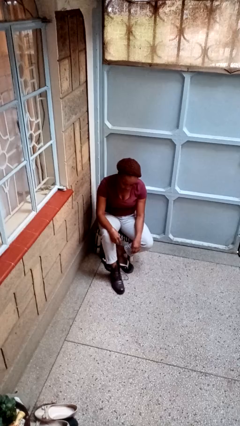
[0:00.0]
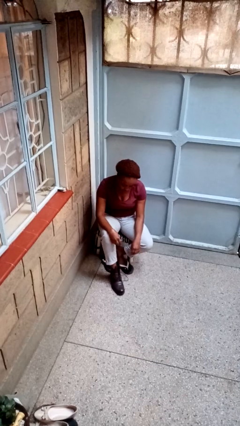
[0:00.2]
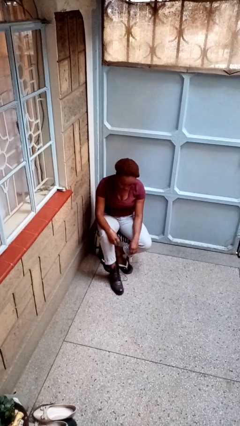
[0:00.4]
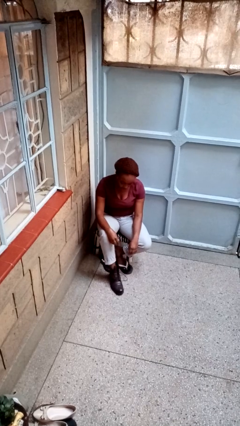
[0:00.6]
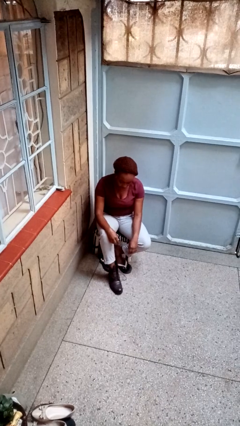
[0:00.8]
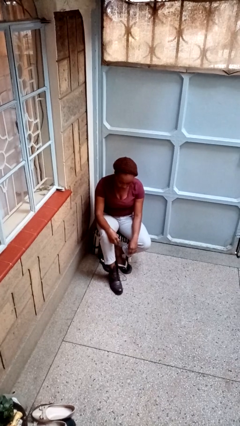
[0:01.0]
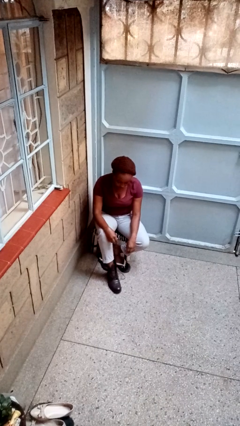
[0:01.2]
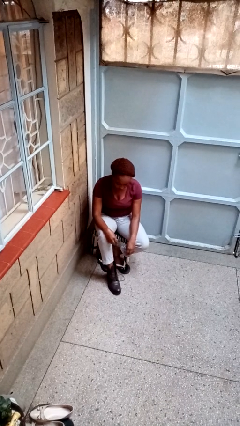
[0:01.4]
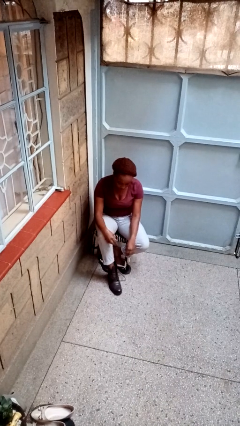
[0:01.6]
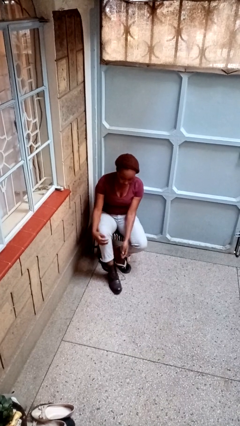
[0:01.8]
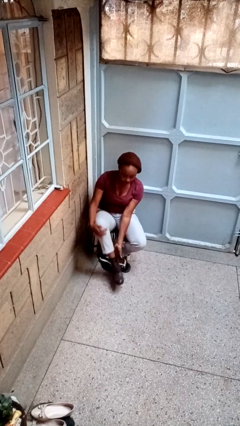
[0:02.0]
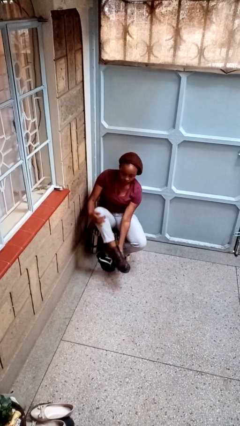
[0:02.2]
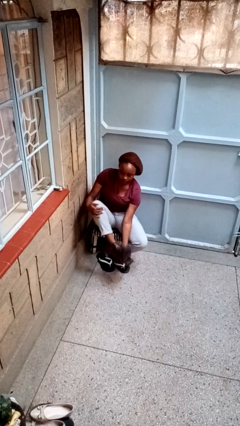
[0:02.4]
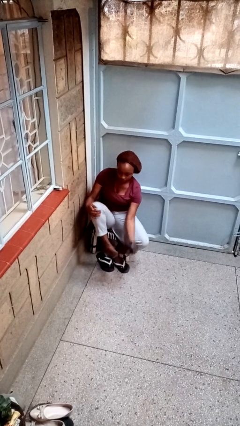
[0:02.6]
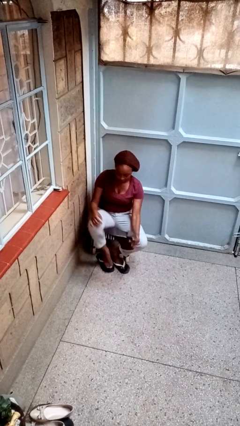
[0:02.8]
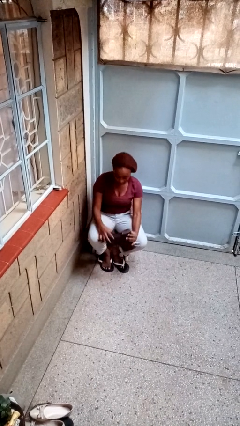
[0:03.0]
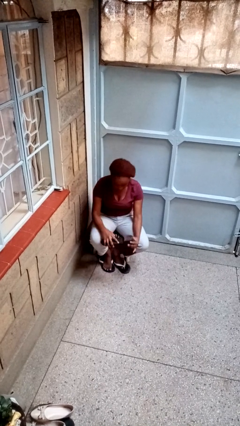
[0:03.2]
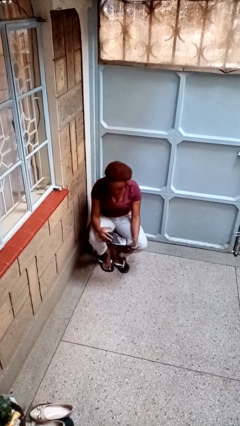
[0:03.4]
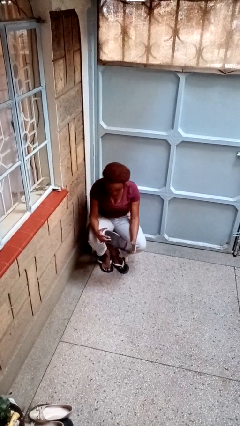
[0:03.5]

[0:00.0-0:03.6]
person takes off boots

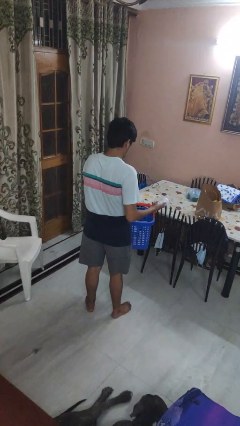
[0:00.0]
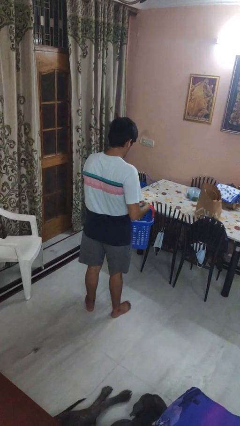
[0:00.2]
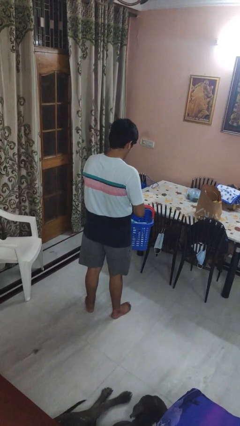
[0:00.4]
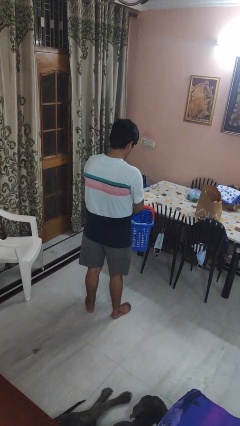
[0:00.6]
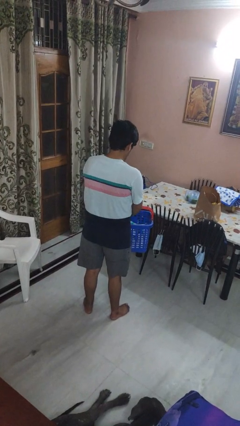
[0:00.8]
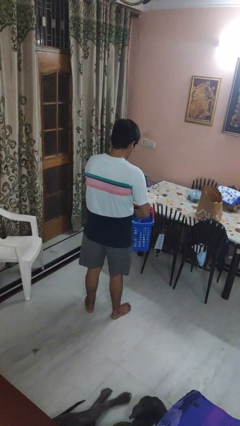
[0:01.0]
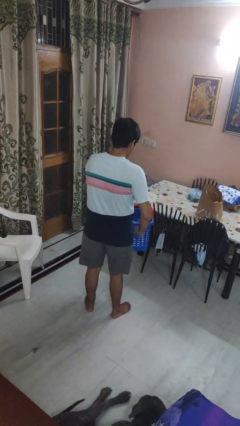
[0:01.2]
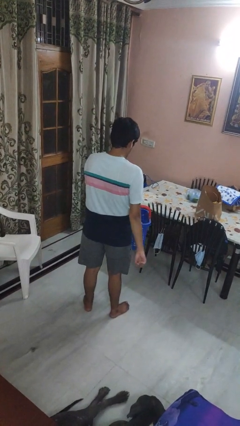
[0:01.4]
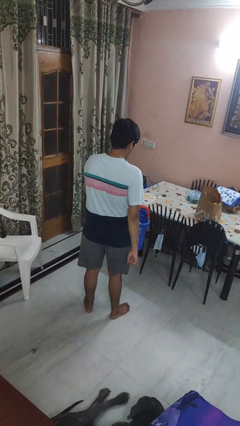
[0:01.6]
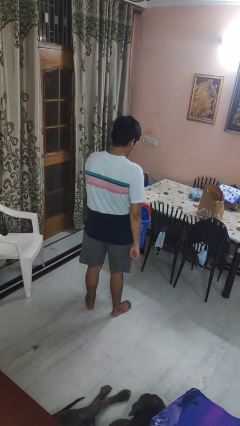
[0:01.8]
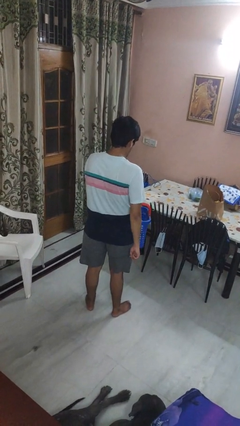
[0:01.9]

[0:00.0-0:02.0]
person puts object into basket

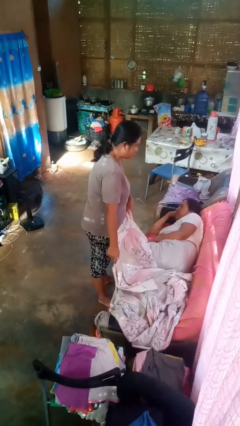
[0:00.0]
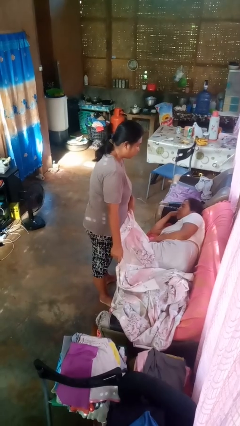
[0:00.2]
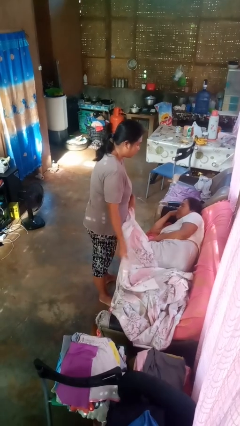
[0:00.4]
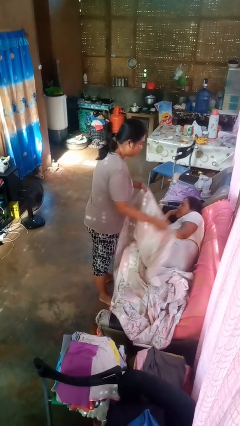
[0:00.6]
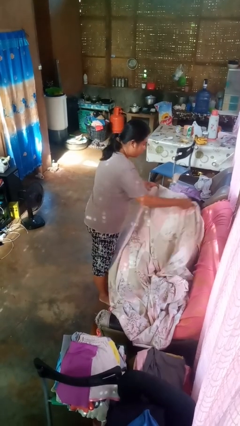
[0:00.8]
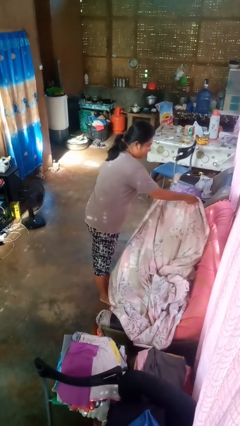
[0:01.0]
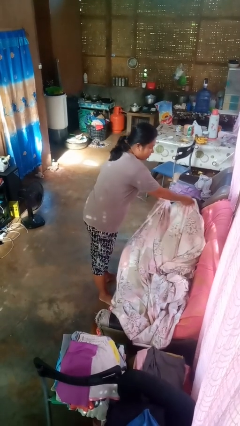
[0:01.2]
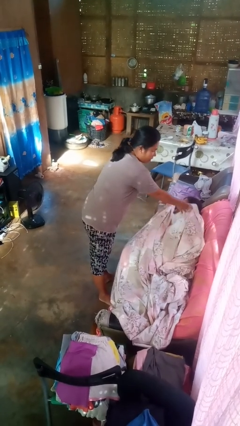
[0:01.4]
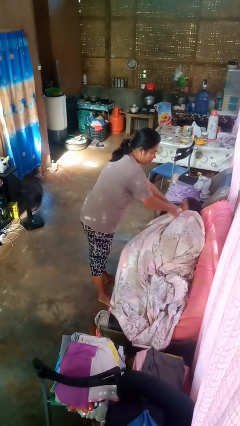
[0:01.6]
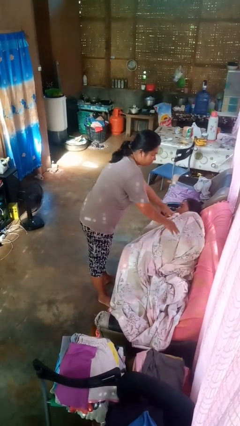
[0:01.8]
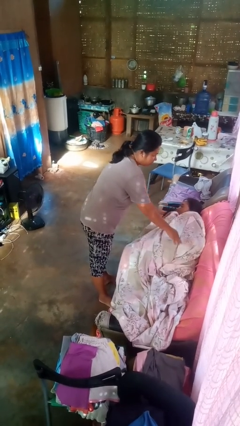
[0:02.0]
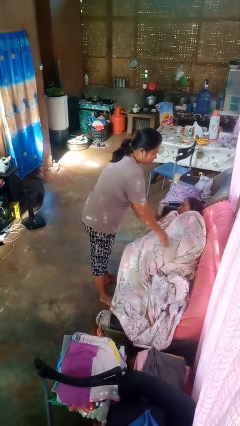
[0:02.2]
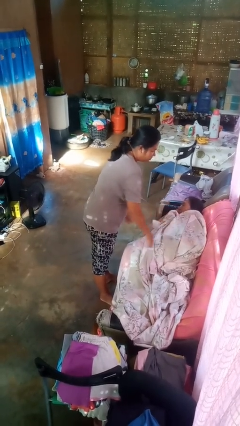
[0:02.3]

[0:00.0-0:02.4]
person covers friend with blanket

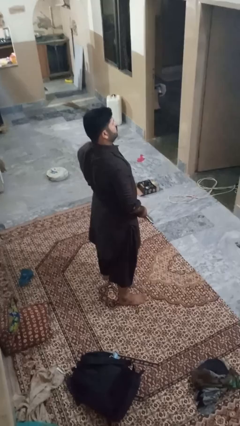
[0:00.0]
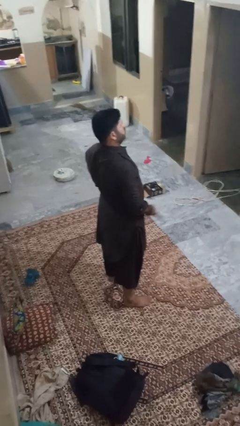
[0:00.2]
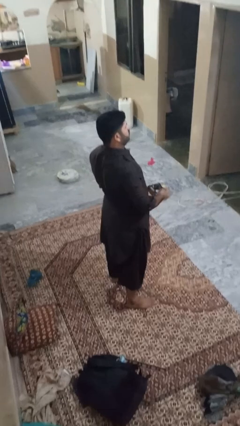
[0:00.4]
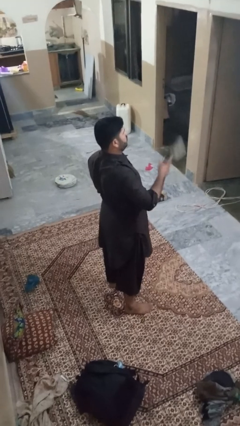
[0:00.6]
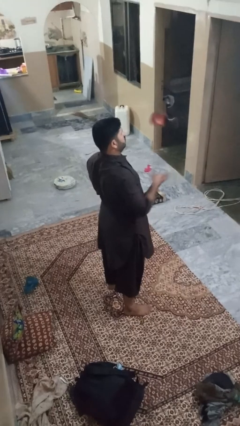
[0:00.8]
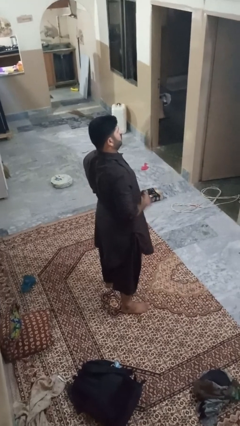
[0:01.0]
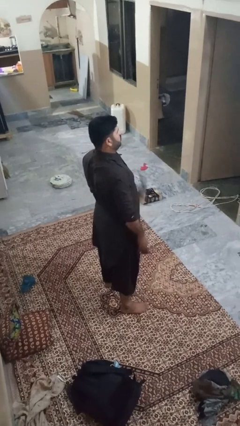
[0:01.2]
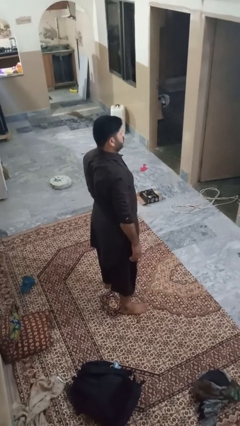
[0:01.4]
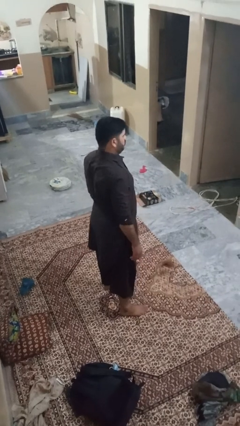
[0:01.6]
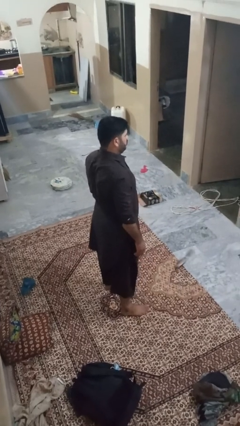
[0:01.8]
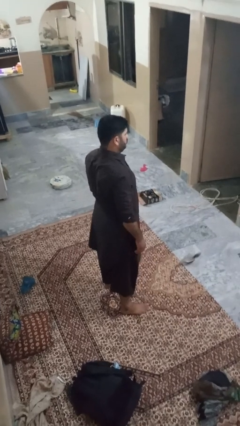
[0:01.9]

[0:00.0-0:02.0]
person throws object into air

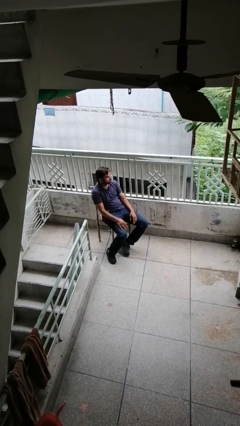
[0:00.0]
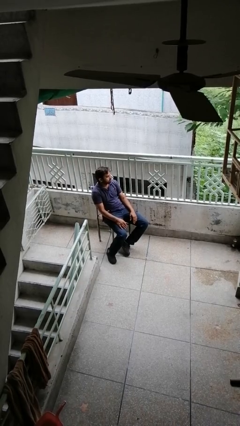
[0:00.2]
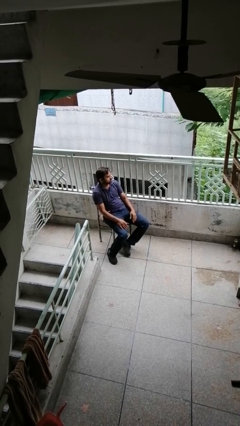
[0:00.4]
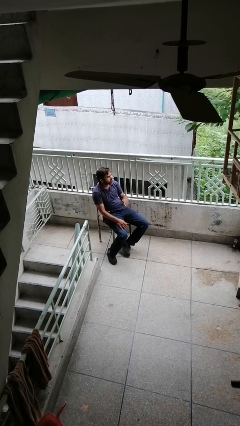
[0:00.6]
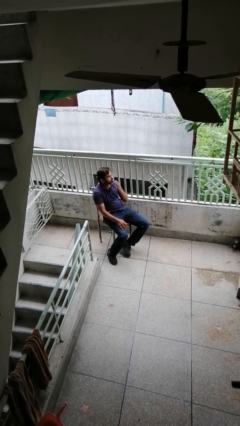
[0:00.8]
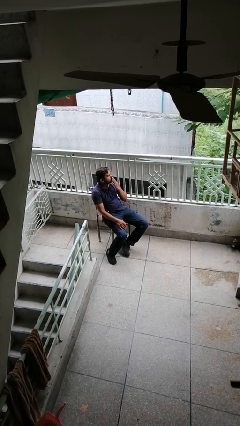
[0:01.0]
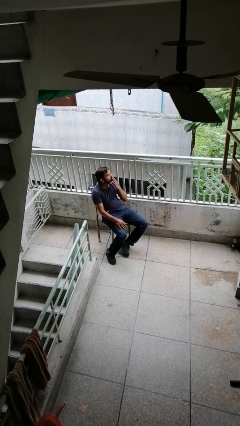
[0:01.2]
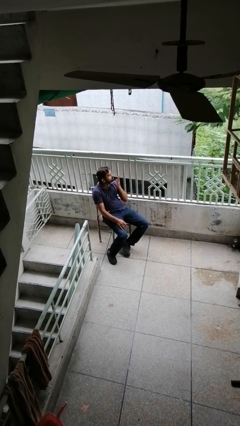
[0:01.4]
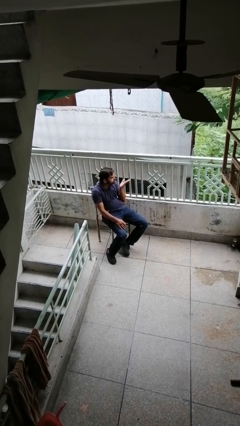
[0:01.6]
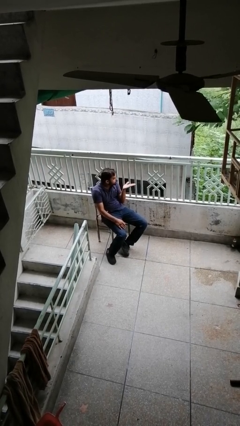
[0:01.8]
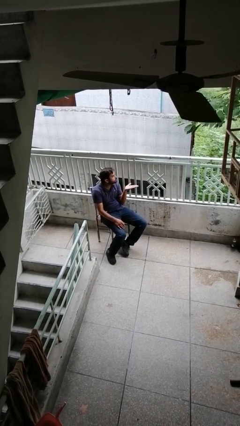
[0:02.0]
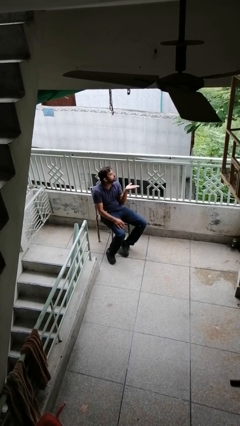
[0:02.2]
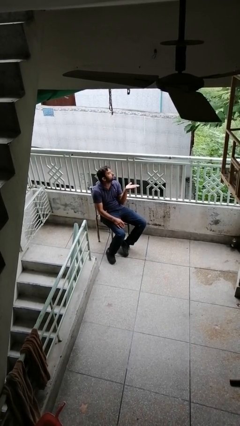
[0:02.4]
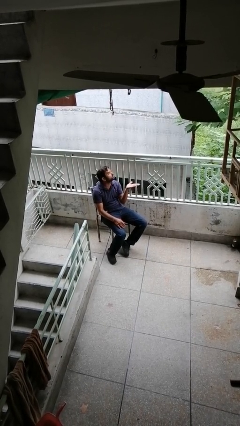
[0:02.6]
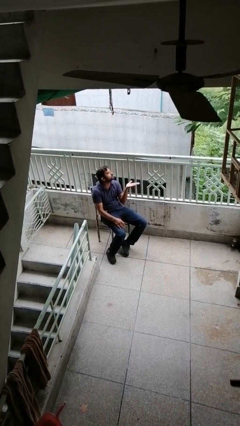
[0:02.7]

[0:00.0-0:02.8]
person gestures blow kiss

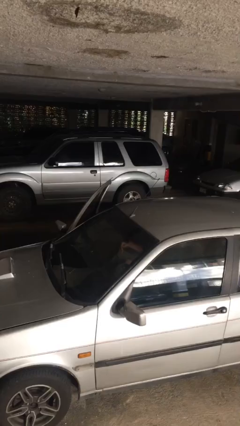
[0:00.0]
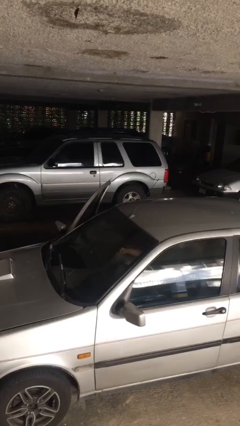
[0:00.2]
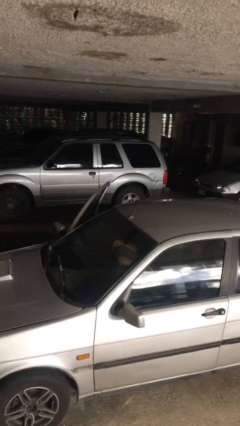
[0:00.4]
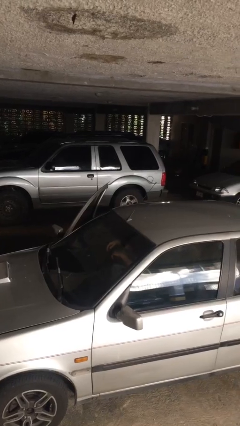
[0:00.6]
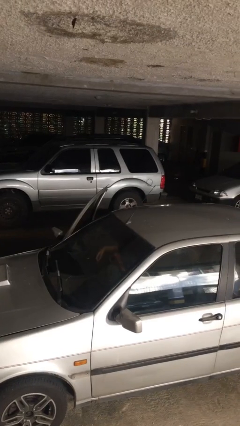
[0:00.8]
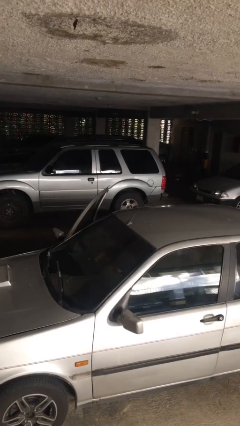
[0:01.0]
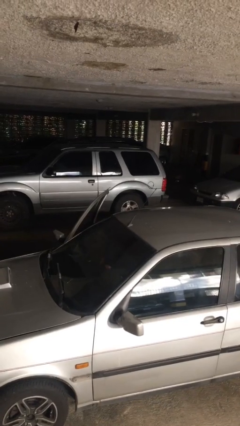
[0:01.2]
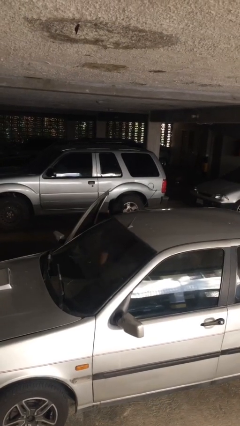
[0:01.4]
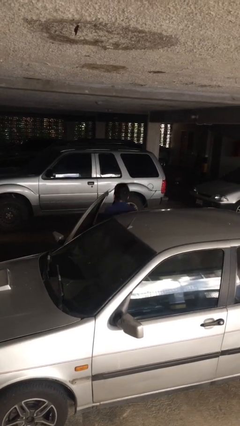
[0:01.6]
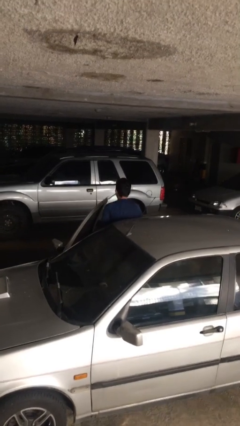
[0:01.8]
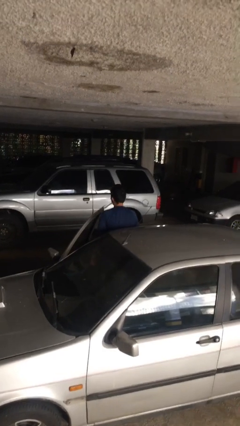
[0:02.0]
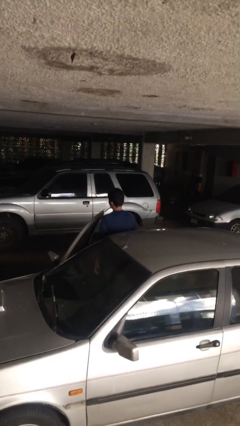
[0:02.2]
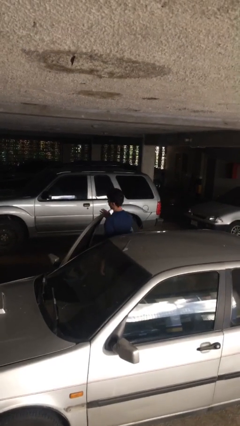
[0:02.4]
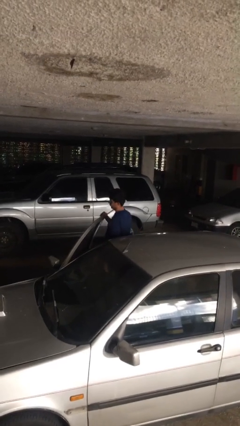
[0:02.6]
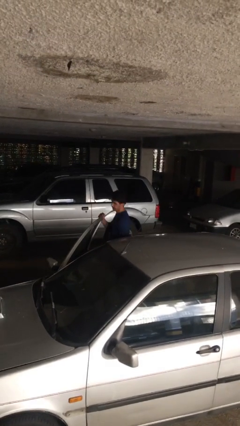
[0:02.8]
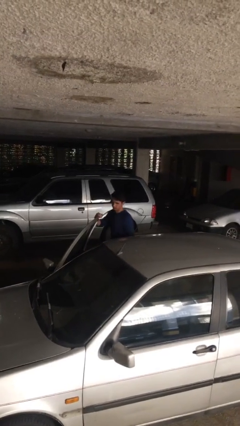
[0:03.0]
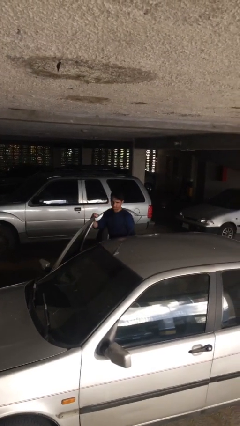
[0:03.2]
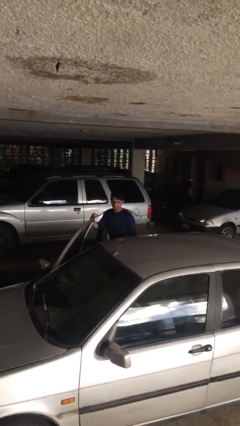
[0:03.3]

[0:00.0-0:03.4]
person exits car

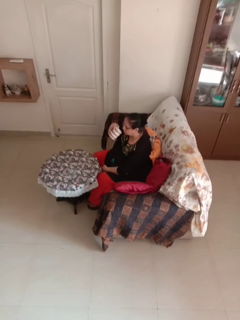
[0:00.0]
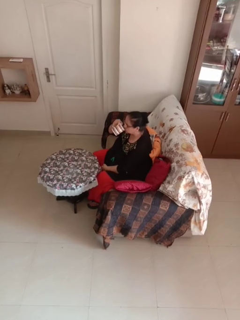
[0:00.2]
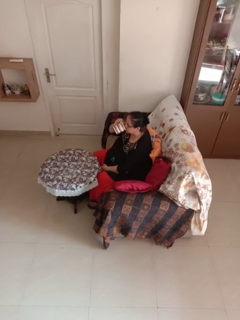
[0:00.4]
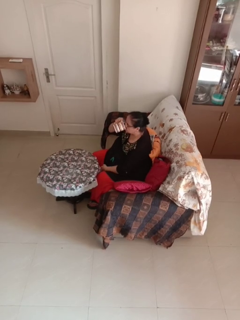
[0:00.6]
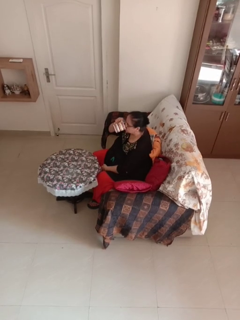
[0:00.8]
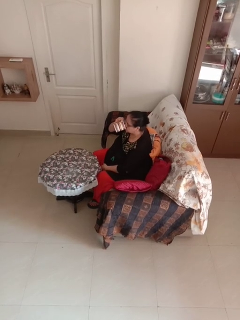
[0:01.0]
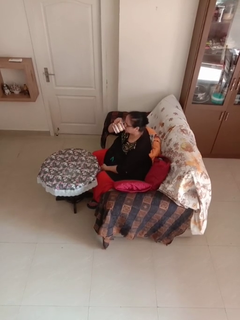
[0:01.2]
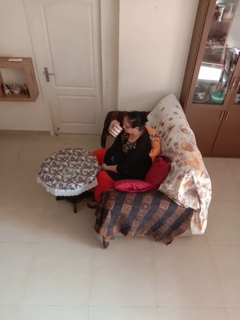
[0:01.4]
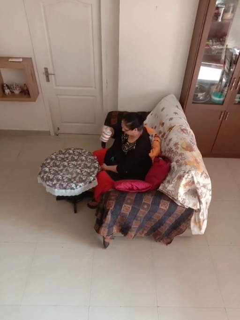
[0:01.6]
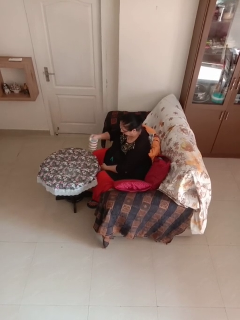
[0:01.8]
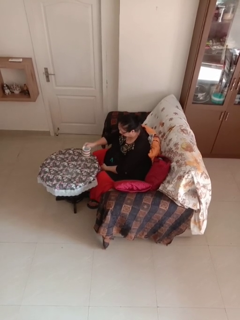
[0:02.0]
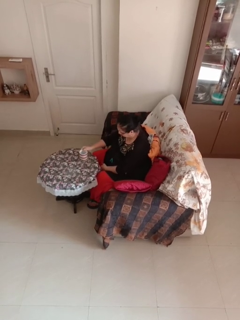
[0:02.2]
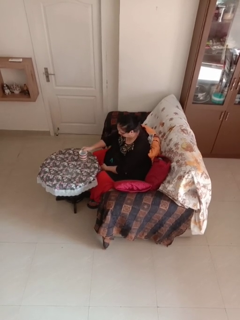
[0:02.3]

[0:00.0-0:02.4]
person drinks from mug
